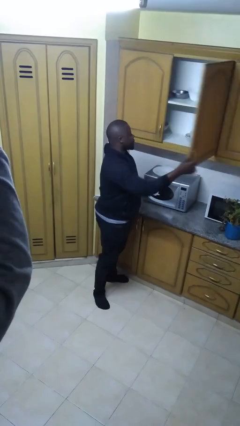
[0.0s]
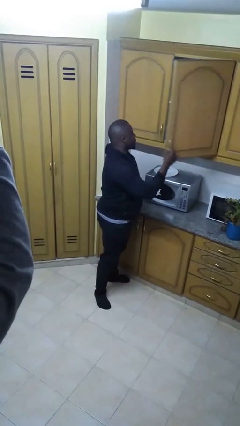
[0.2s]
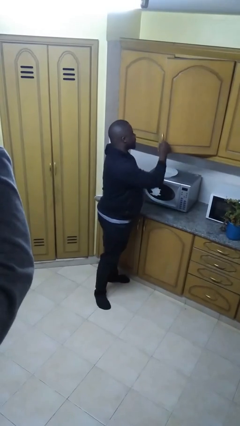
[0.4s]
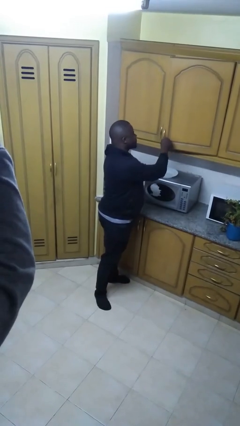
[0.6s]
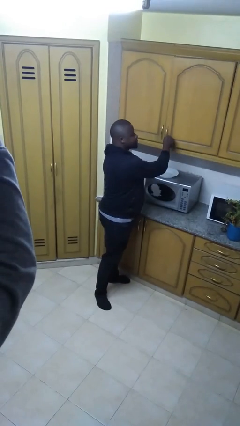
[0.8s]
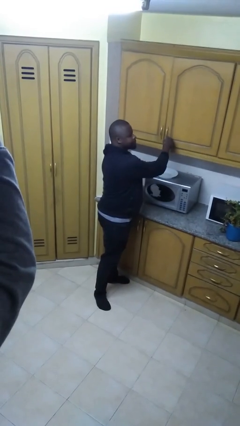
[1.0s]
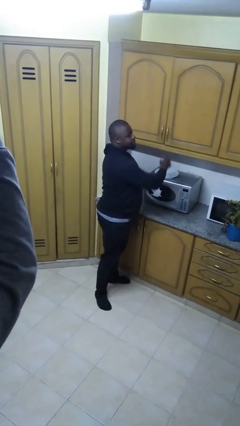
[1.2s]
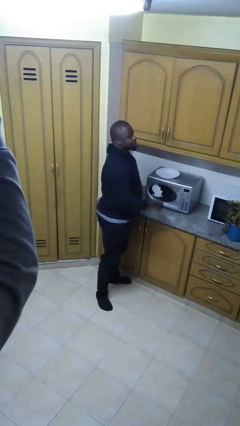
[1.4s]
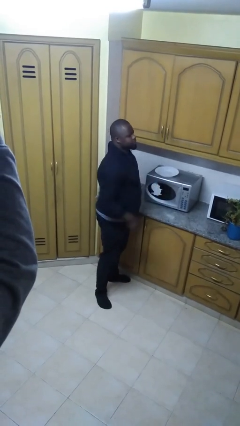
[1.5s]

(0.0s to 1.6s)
person closes cabinet

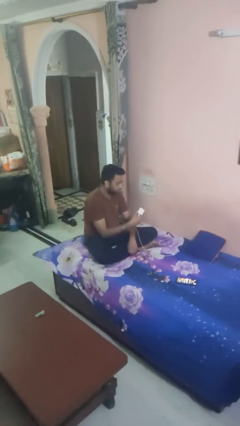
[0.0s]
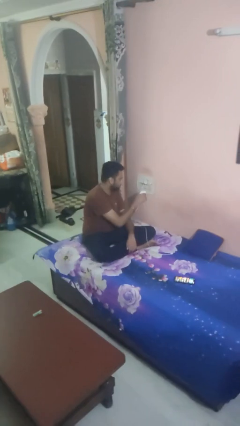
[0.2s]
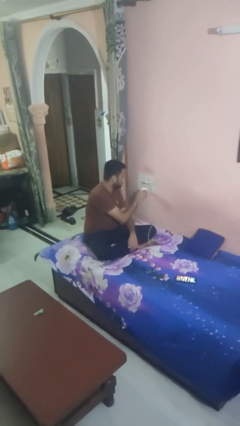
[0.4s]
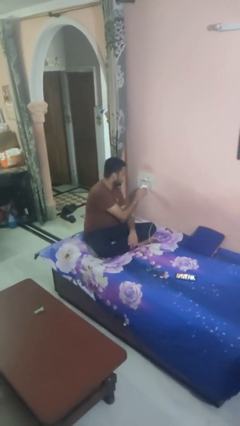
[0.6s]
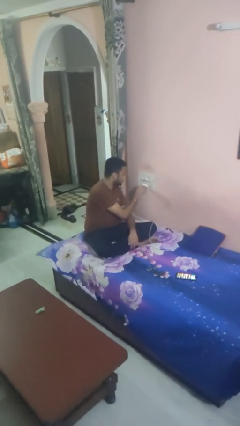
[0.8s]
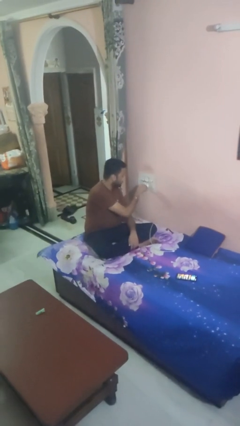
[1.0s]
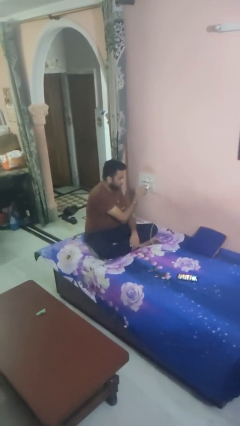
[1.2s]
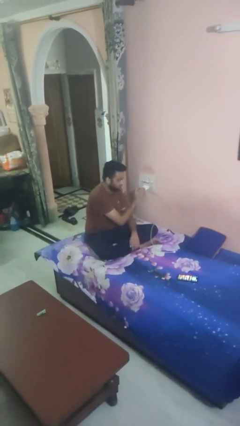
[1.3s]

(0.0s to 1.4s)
person plugs into electrical socket

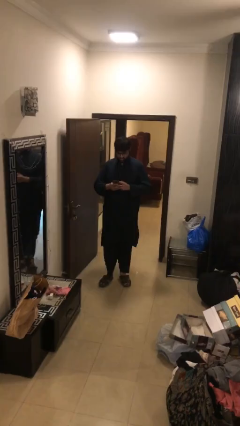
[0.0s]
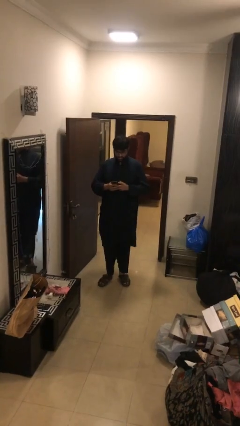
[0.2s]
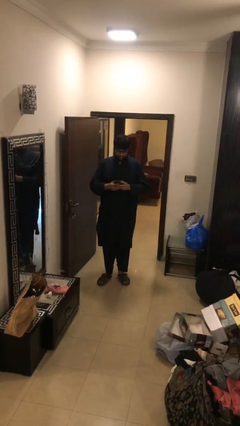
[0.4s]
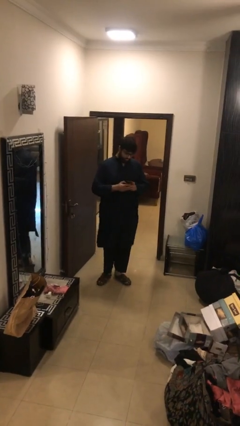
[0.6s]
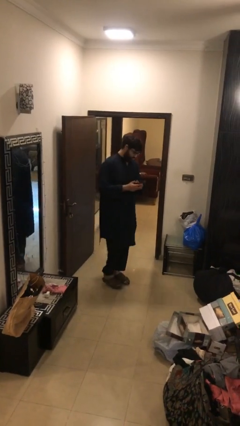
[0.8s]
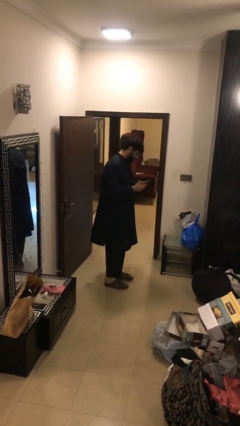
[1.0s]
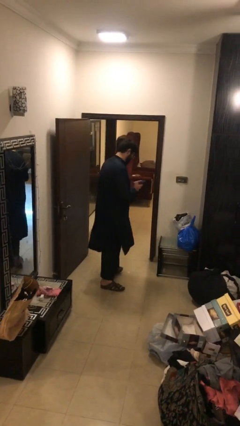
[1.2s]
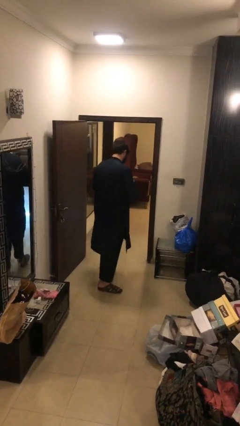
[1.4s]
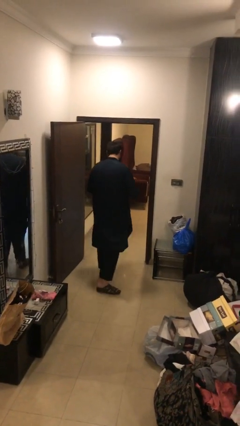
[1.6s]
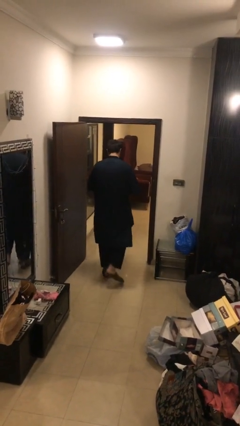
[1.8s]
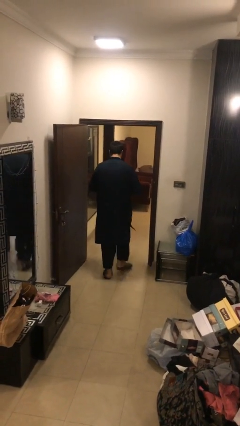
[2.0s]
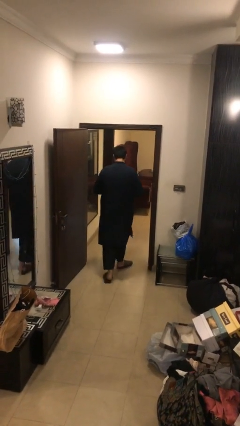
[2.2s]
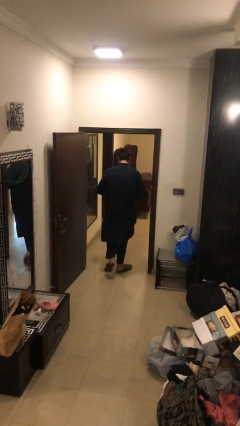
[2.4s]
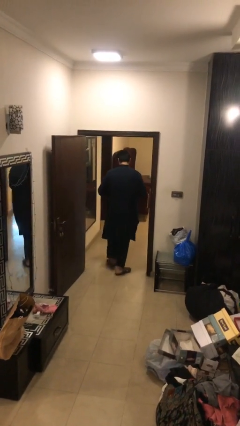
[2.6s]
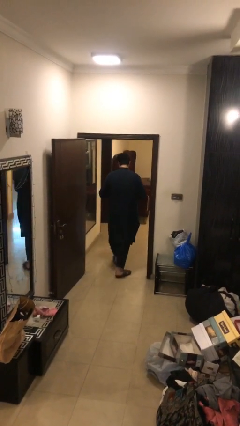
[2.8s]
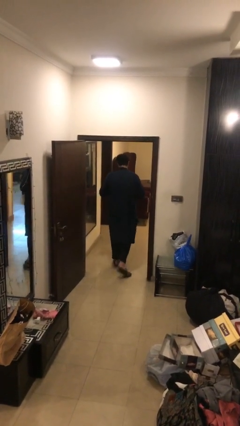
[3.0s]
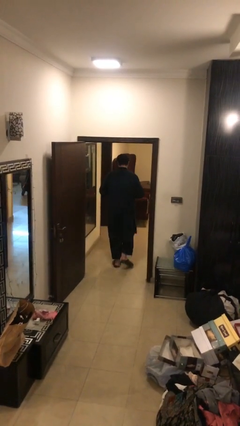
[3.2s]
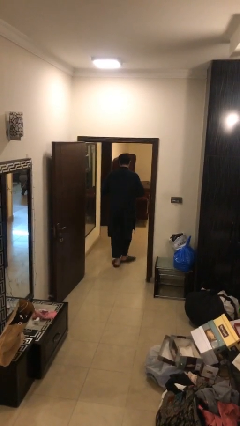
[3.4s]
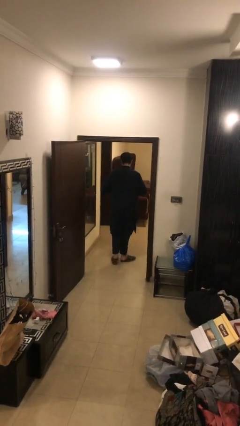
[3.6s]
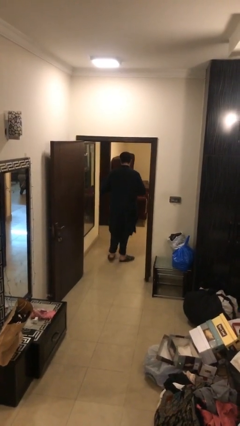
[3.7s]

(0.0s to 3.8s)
person exits scene through structure

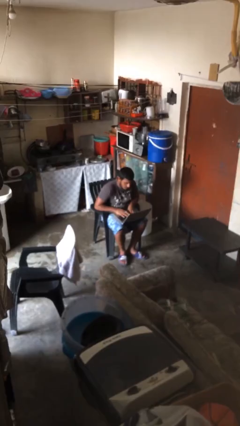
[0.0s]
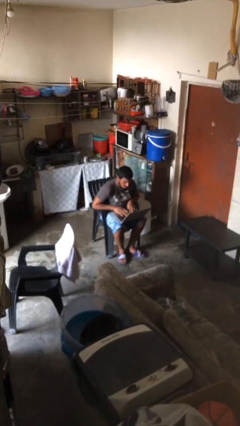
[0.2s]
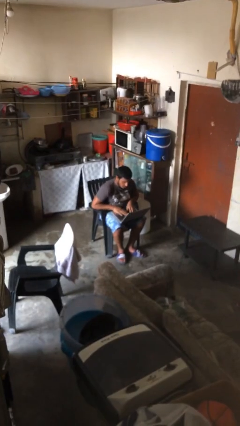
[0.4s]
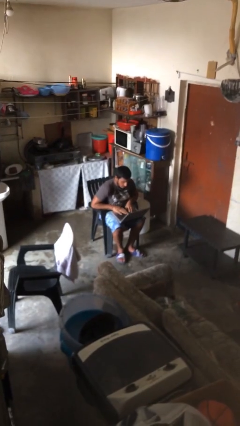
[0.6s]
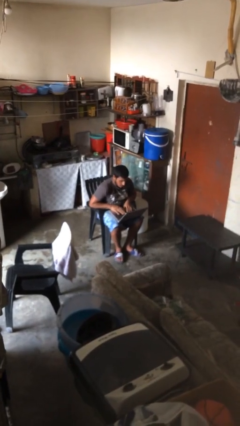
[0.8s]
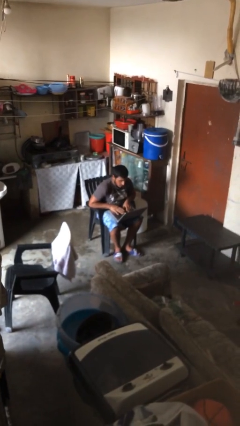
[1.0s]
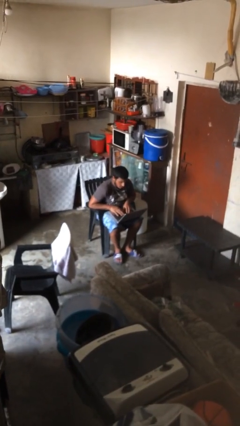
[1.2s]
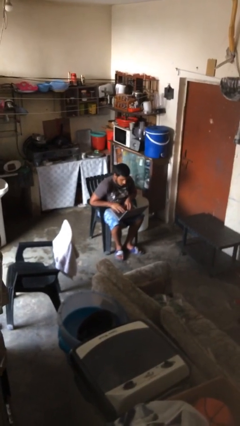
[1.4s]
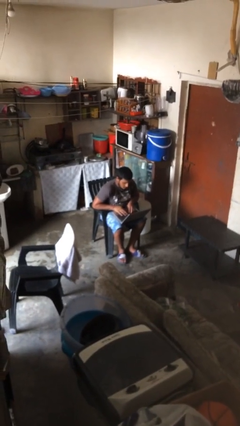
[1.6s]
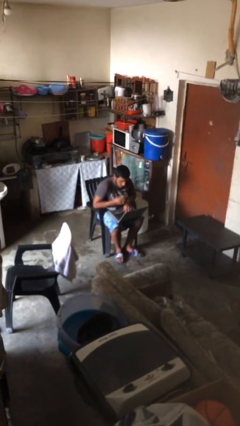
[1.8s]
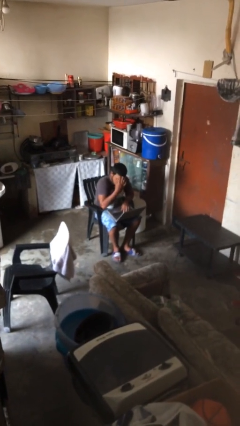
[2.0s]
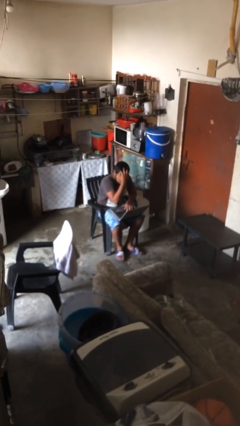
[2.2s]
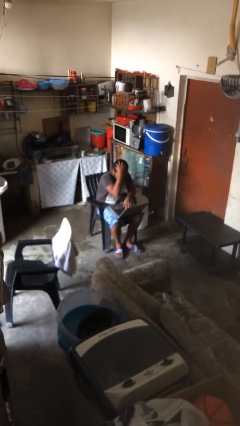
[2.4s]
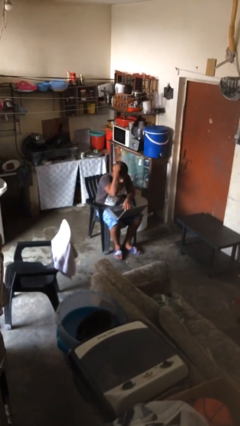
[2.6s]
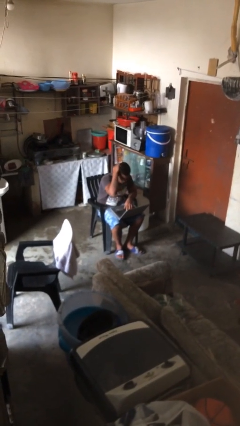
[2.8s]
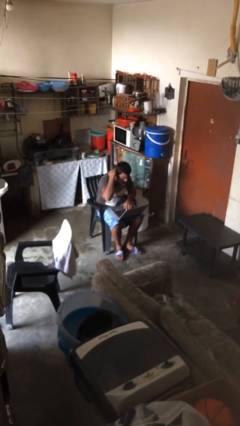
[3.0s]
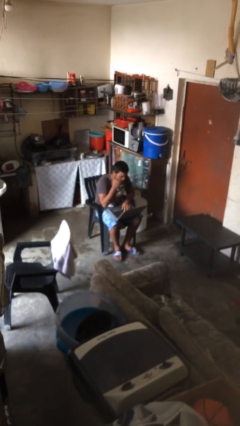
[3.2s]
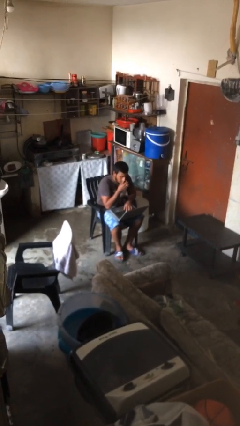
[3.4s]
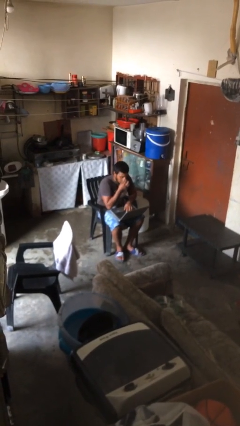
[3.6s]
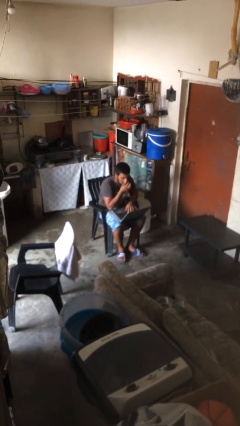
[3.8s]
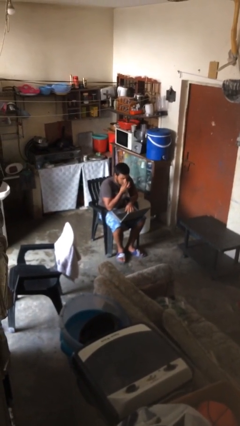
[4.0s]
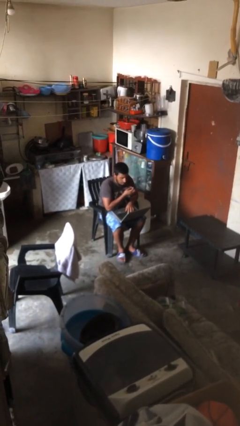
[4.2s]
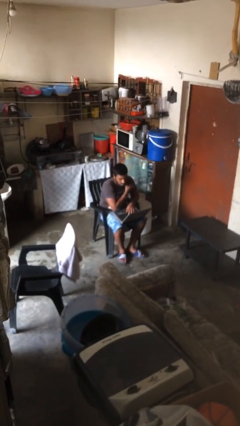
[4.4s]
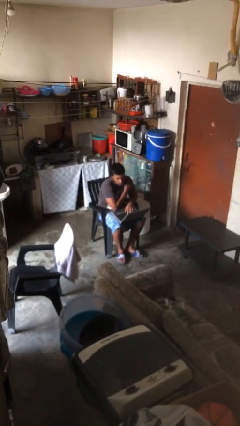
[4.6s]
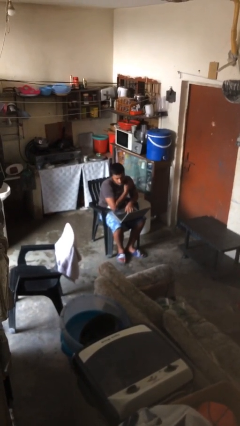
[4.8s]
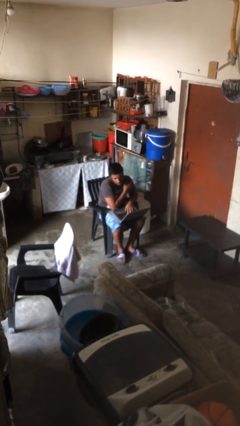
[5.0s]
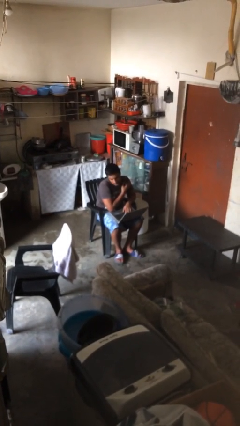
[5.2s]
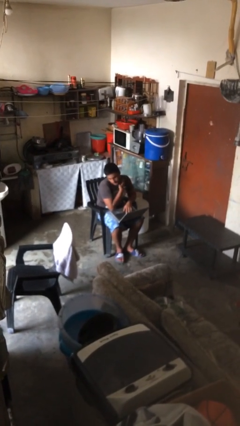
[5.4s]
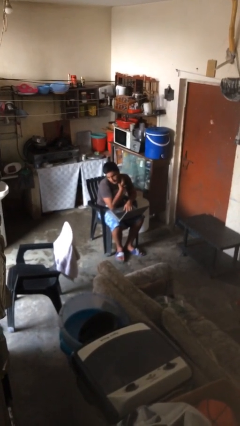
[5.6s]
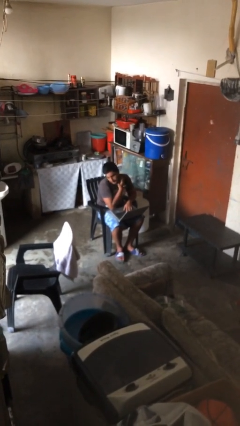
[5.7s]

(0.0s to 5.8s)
person interacts with laptop

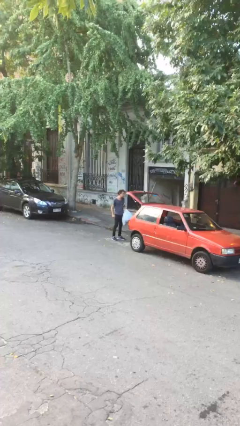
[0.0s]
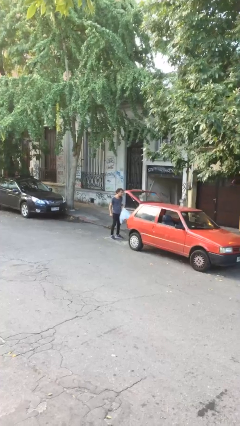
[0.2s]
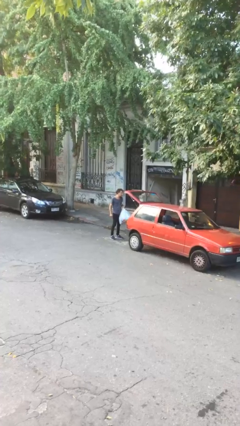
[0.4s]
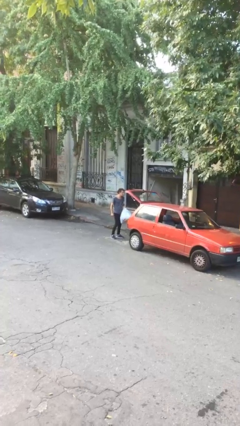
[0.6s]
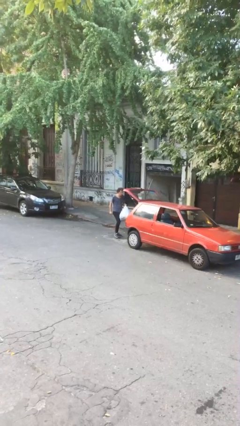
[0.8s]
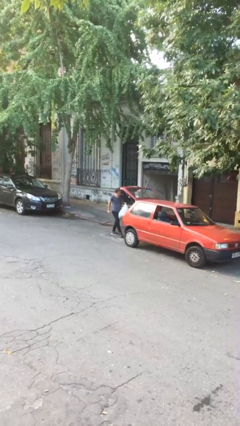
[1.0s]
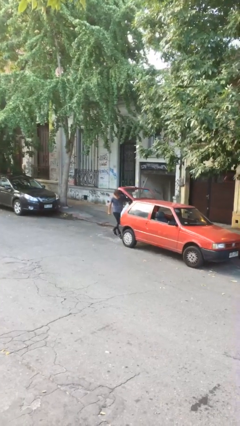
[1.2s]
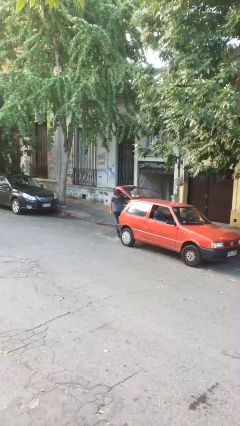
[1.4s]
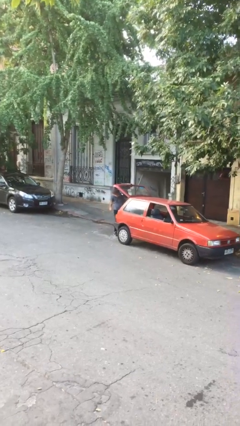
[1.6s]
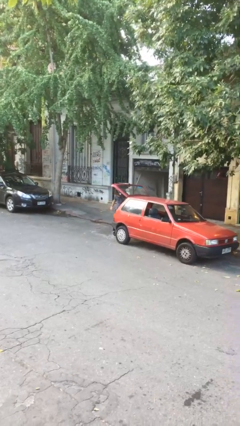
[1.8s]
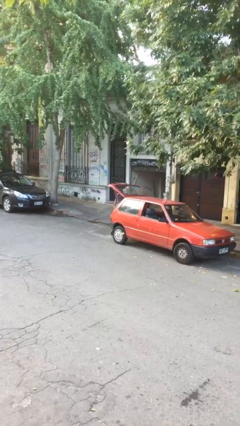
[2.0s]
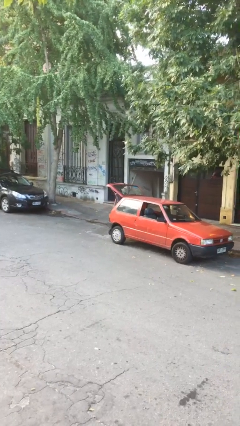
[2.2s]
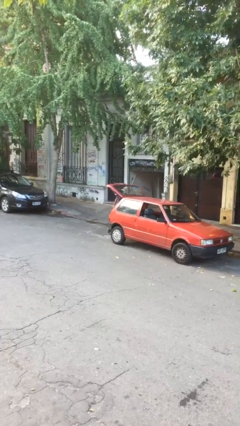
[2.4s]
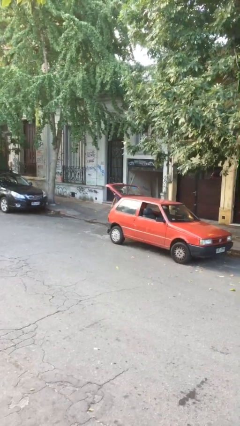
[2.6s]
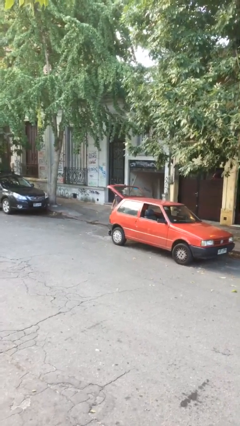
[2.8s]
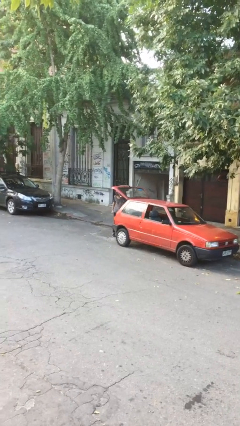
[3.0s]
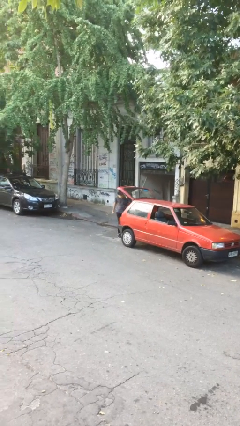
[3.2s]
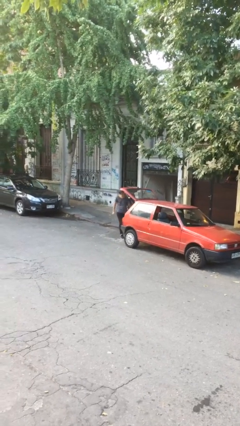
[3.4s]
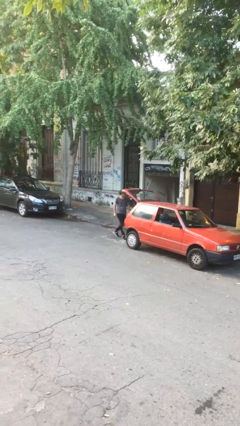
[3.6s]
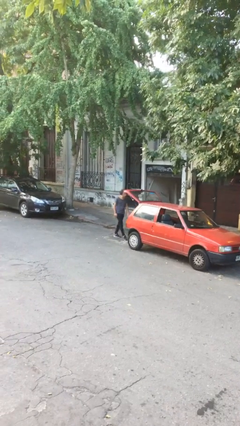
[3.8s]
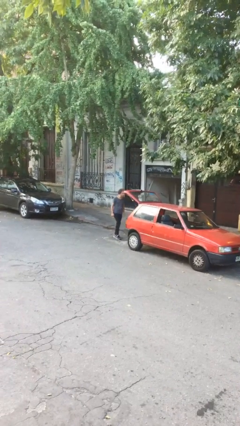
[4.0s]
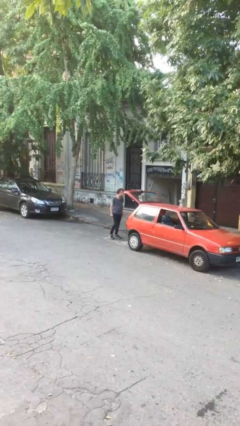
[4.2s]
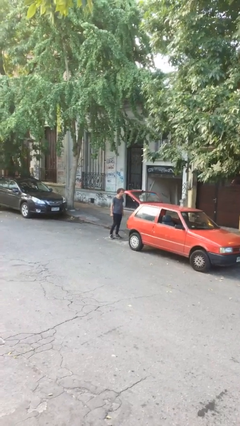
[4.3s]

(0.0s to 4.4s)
person loads car

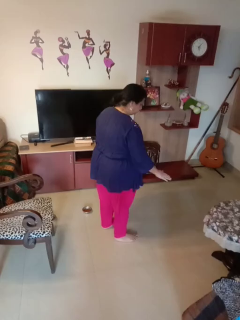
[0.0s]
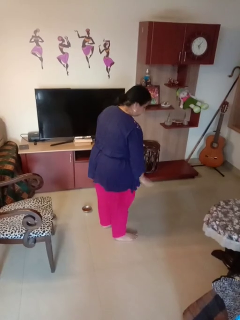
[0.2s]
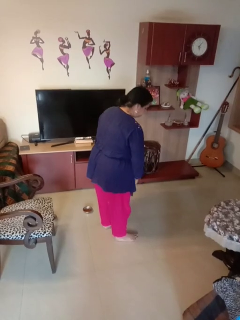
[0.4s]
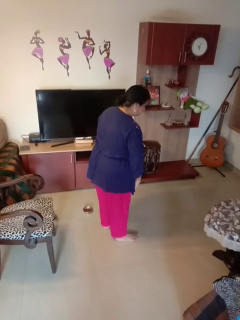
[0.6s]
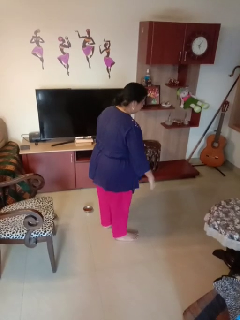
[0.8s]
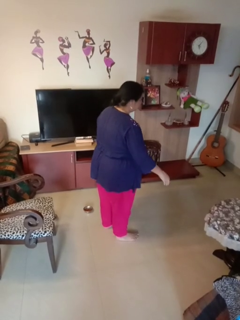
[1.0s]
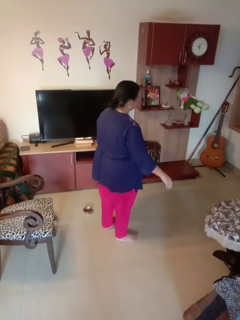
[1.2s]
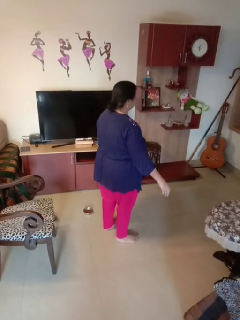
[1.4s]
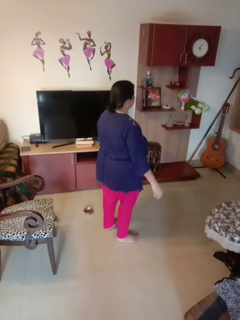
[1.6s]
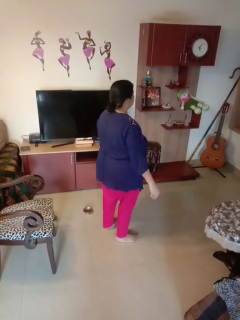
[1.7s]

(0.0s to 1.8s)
person slaps hands on thighs
